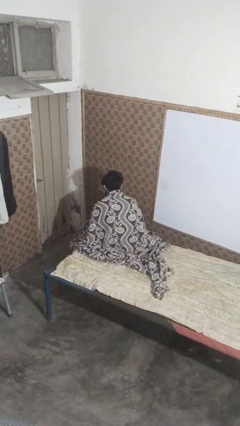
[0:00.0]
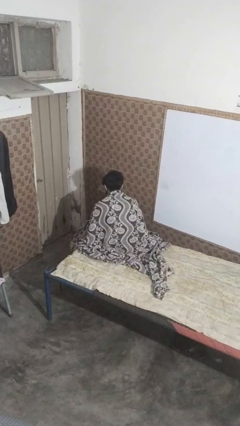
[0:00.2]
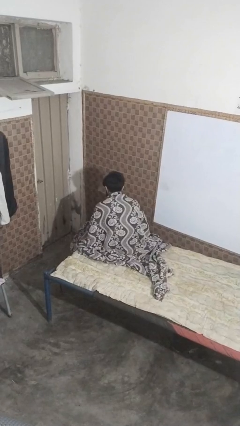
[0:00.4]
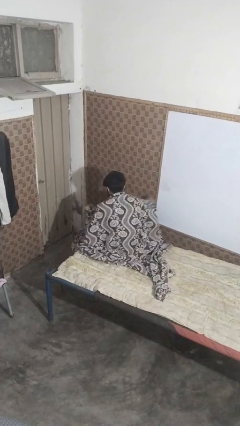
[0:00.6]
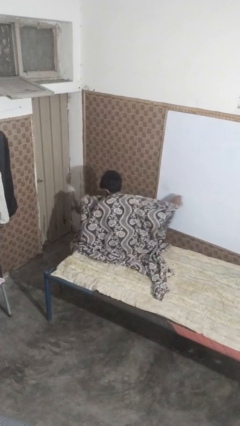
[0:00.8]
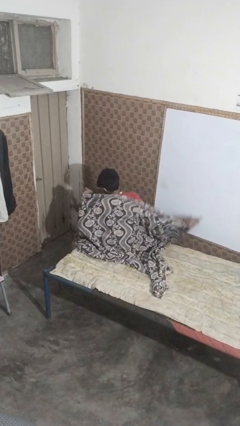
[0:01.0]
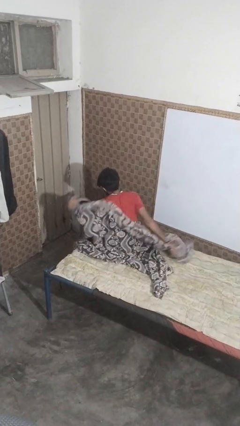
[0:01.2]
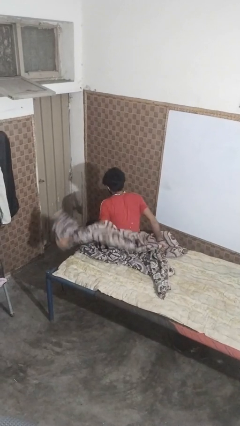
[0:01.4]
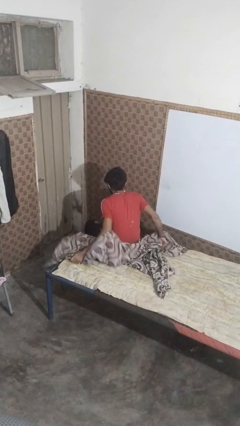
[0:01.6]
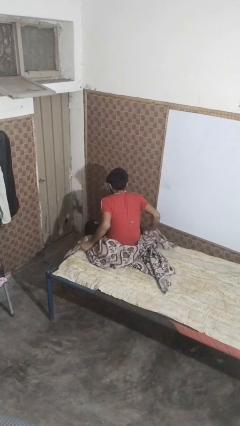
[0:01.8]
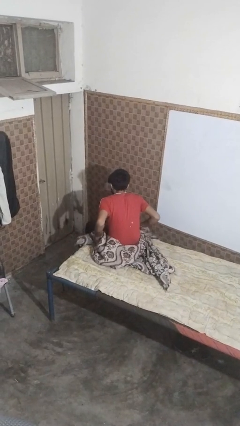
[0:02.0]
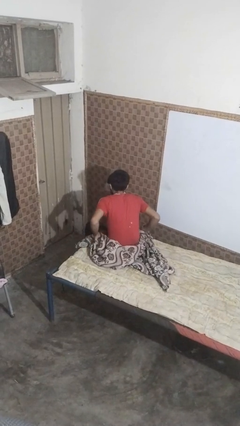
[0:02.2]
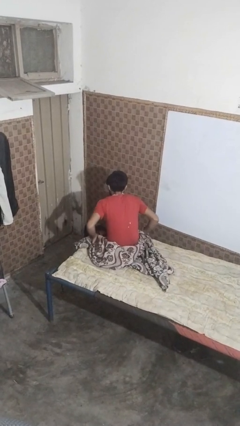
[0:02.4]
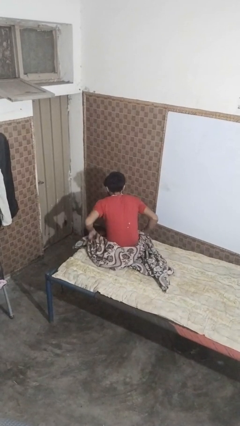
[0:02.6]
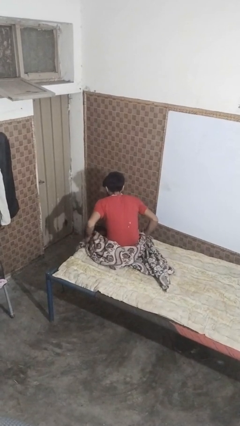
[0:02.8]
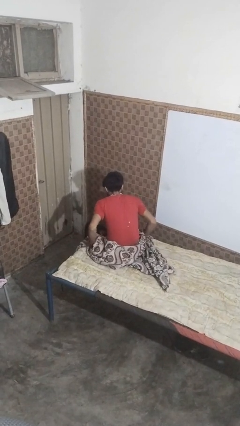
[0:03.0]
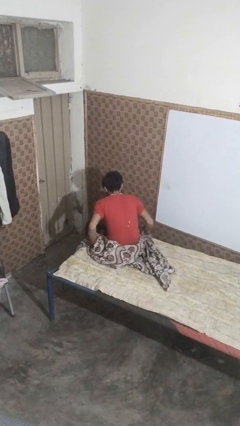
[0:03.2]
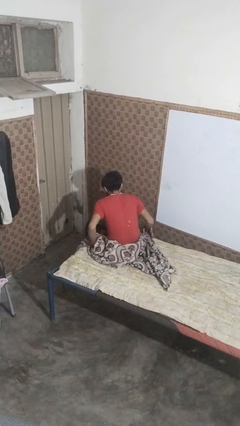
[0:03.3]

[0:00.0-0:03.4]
person uncovers with bedsheets

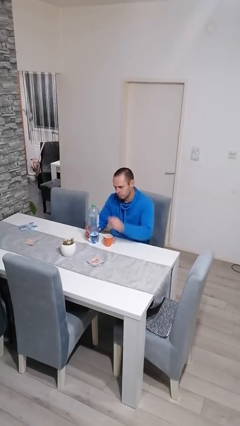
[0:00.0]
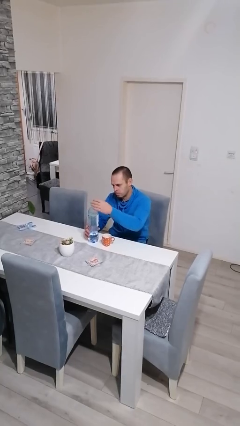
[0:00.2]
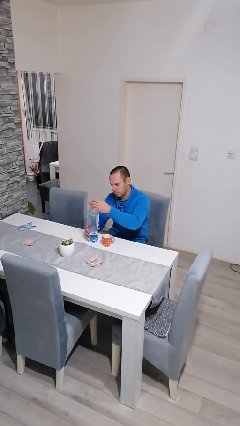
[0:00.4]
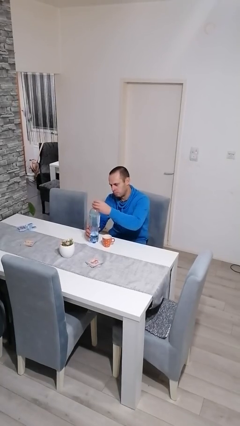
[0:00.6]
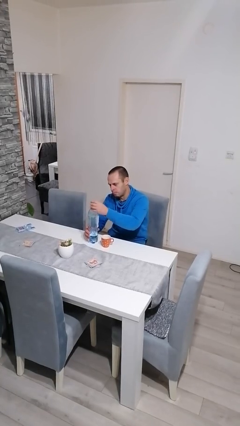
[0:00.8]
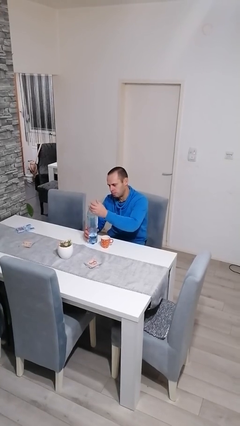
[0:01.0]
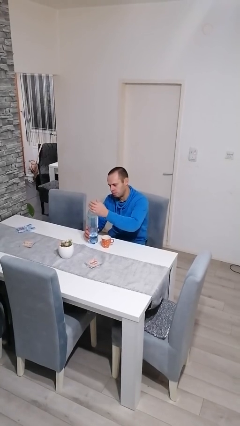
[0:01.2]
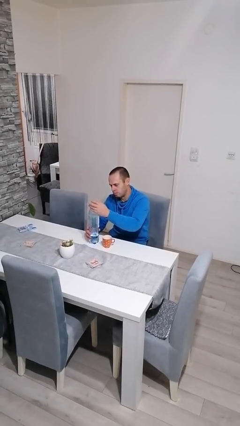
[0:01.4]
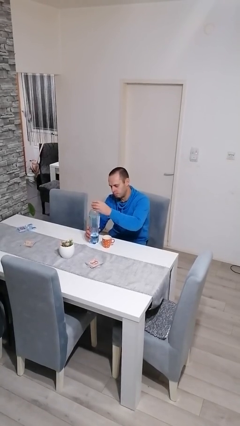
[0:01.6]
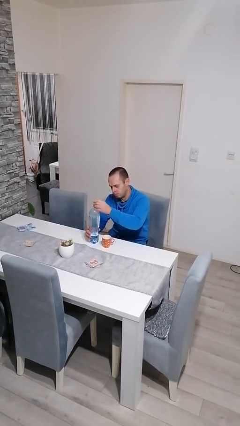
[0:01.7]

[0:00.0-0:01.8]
person unscrews lid from bottle

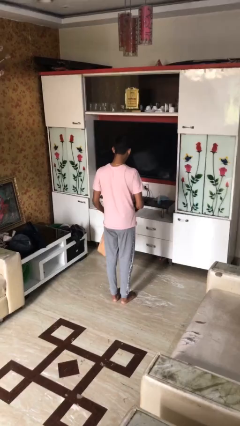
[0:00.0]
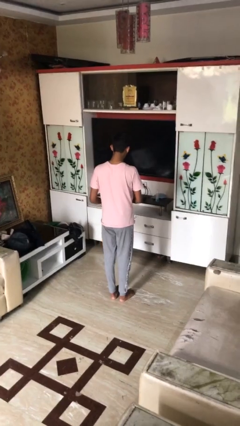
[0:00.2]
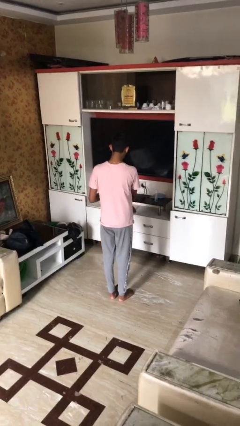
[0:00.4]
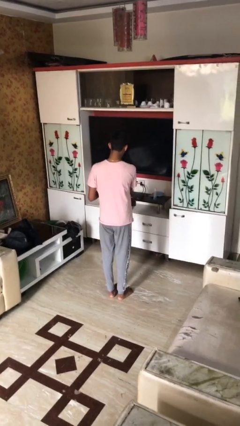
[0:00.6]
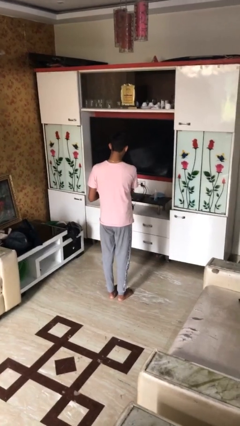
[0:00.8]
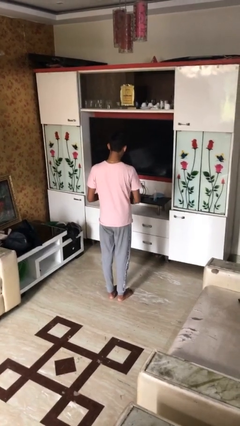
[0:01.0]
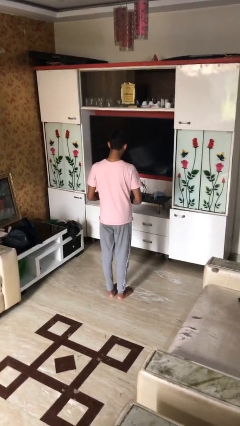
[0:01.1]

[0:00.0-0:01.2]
person puts object into bag

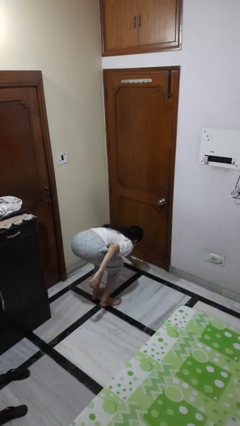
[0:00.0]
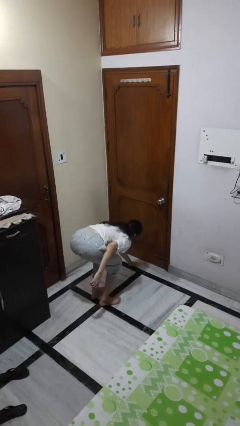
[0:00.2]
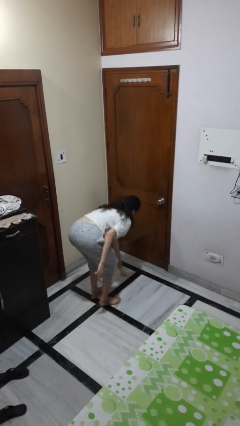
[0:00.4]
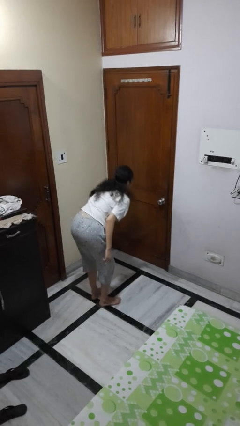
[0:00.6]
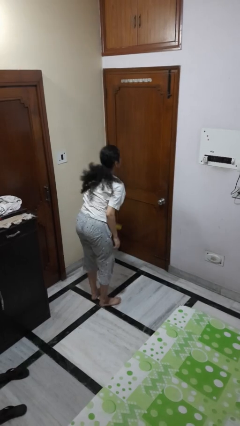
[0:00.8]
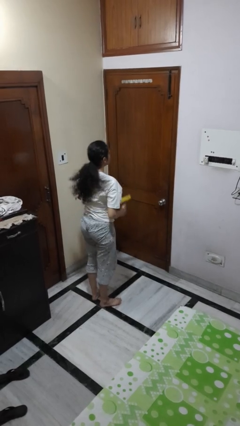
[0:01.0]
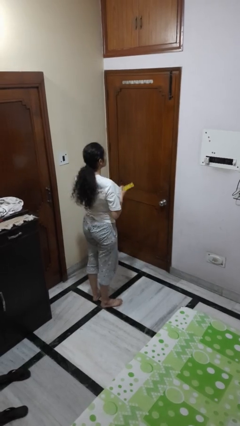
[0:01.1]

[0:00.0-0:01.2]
person picks up object from floor

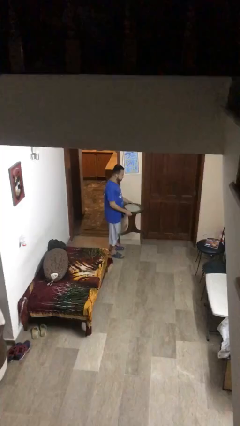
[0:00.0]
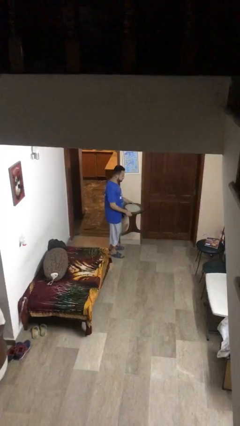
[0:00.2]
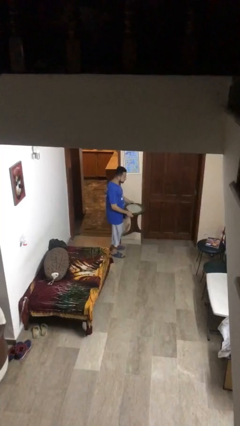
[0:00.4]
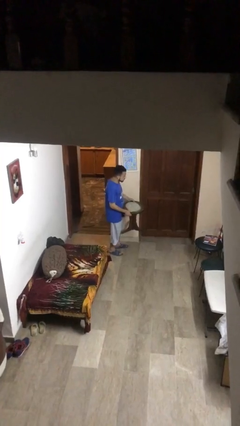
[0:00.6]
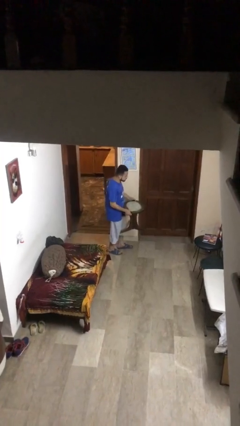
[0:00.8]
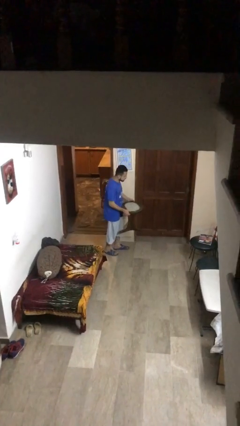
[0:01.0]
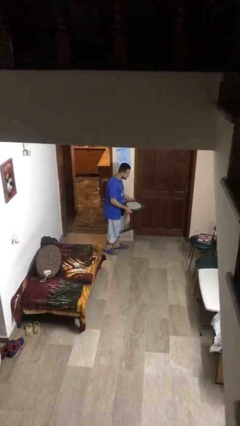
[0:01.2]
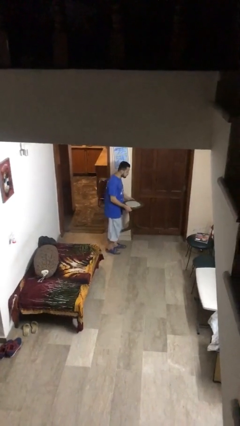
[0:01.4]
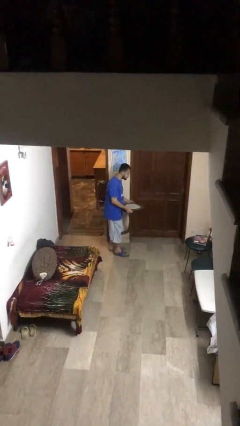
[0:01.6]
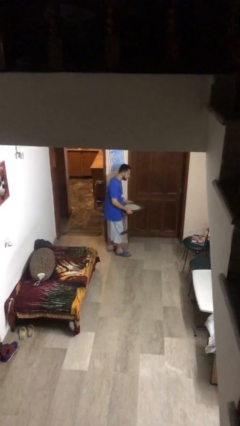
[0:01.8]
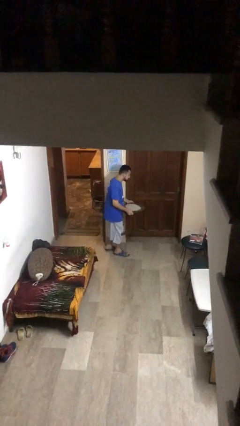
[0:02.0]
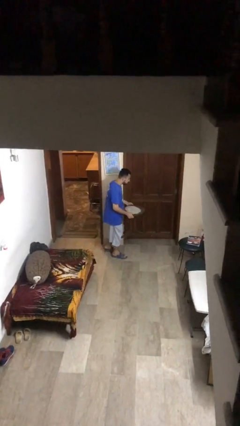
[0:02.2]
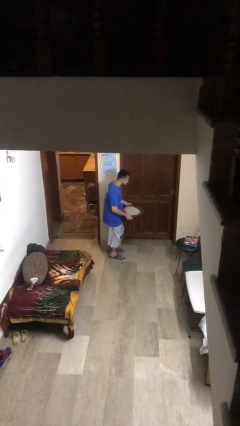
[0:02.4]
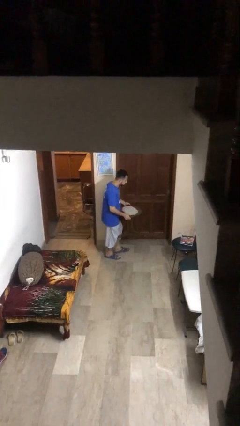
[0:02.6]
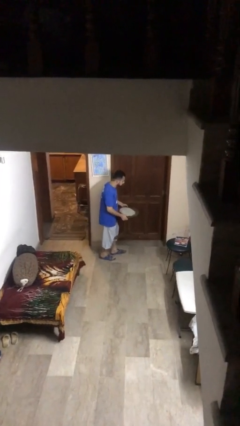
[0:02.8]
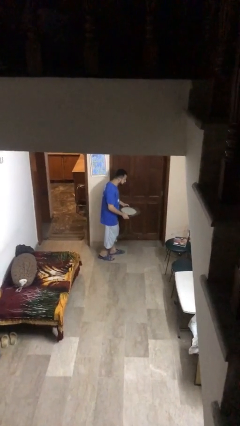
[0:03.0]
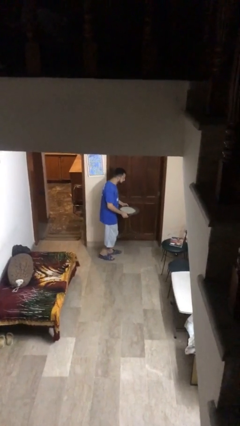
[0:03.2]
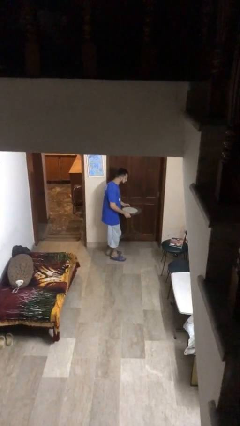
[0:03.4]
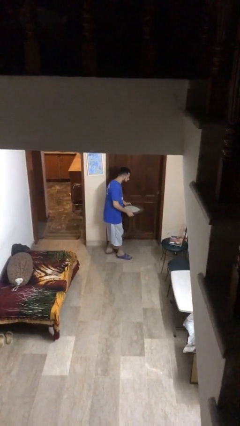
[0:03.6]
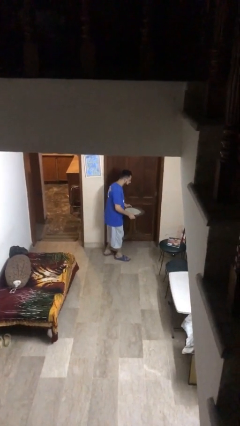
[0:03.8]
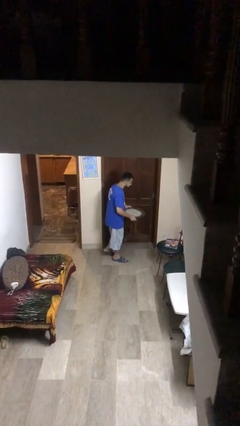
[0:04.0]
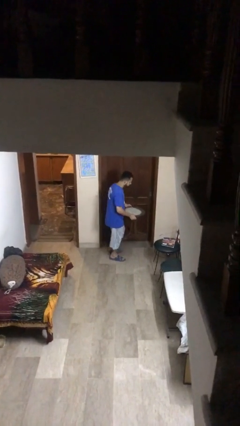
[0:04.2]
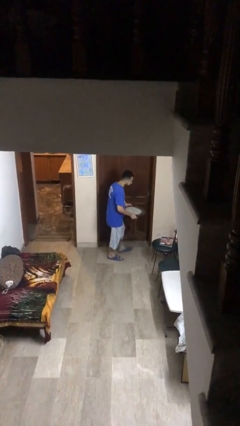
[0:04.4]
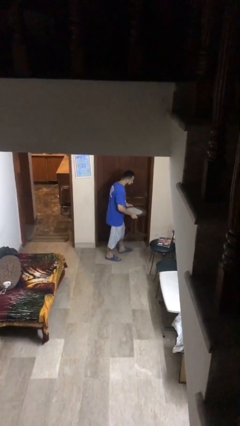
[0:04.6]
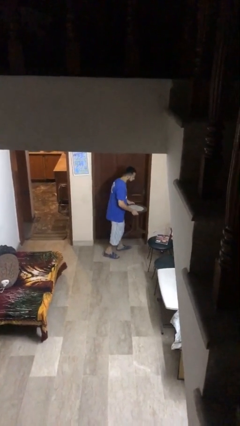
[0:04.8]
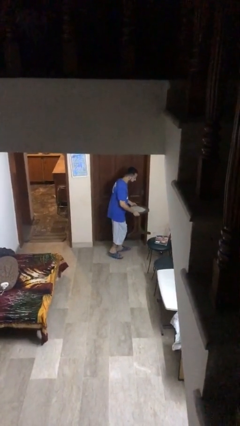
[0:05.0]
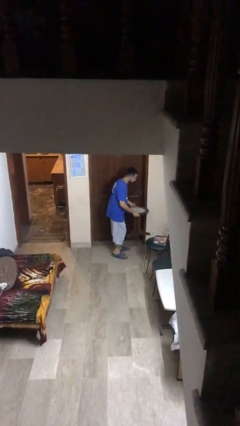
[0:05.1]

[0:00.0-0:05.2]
person carries heavy object

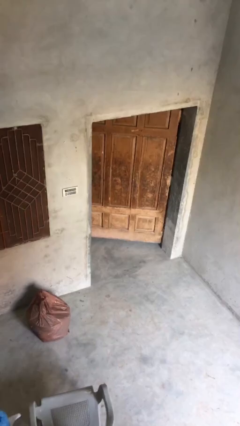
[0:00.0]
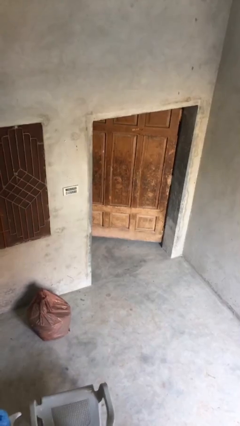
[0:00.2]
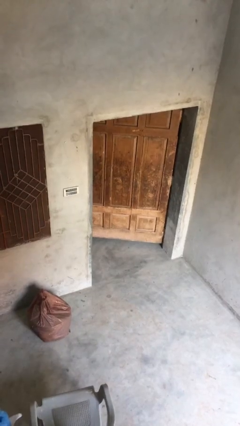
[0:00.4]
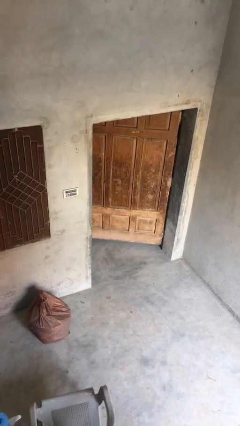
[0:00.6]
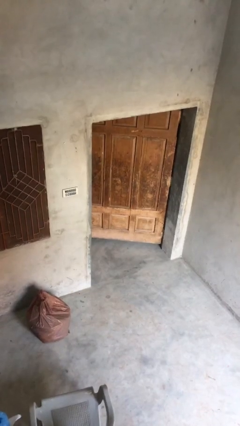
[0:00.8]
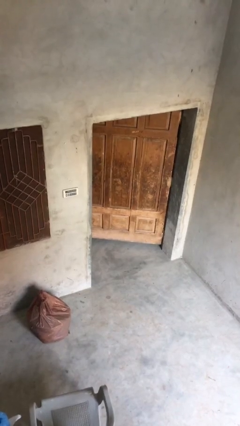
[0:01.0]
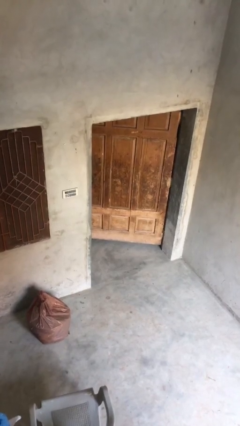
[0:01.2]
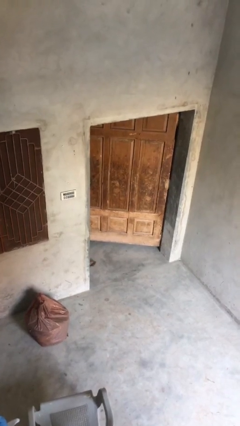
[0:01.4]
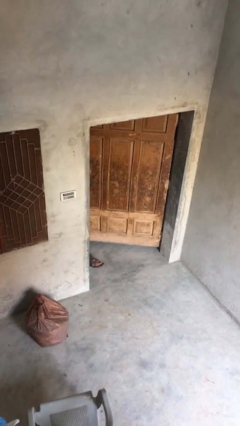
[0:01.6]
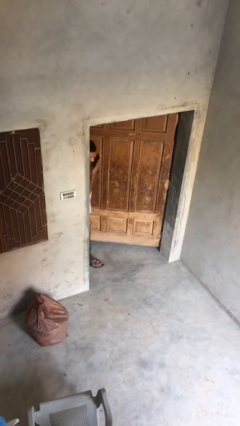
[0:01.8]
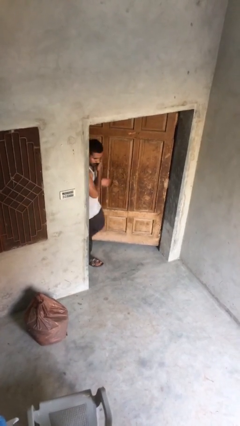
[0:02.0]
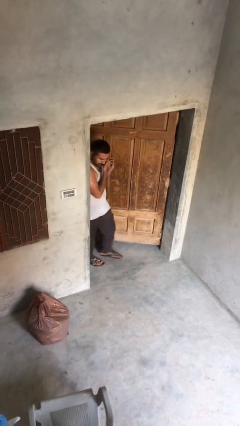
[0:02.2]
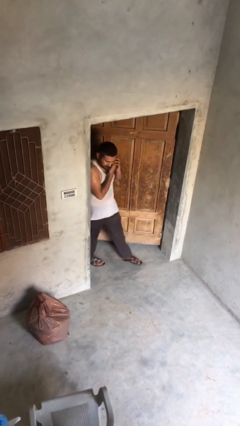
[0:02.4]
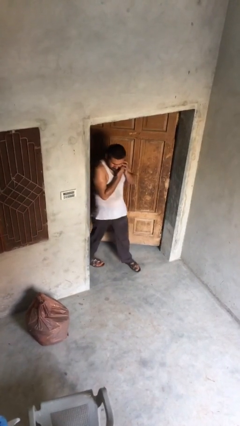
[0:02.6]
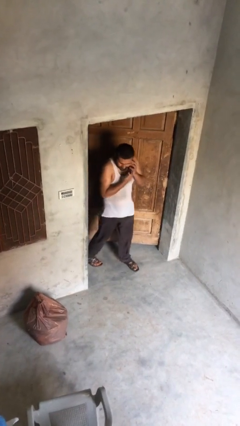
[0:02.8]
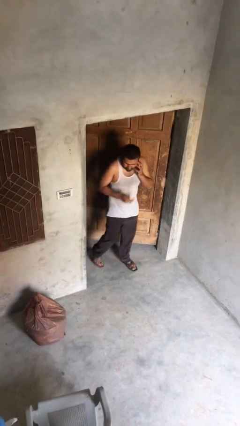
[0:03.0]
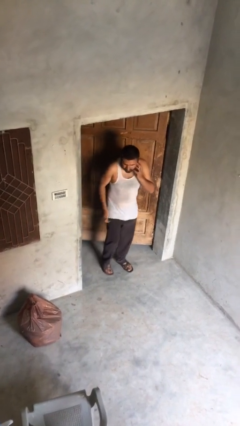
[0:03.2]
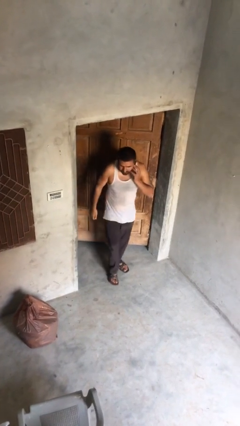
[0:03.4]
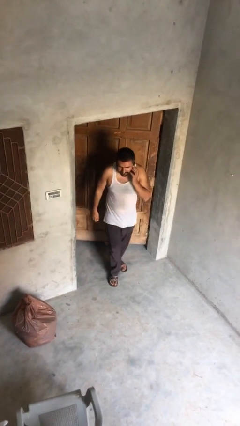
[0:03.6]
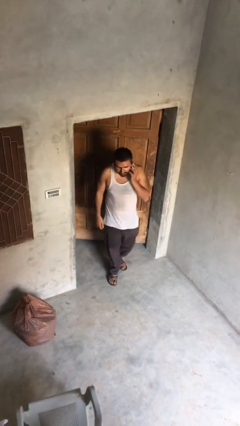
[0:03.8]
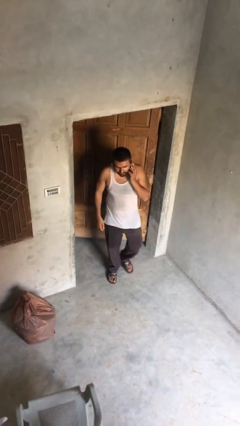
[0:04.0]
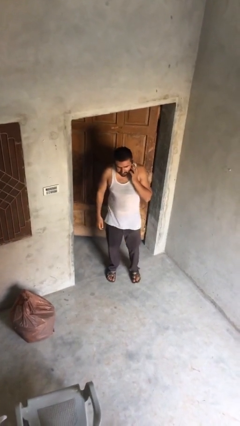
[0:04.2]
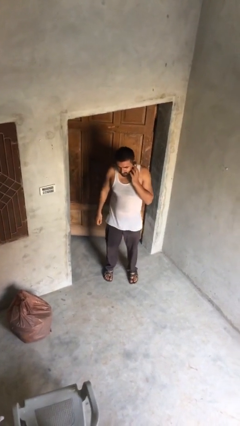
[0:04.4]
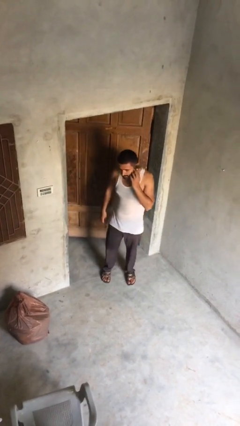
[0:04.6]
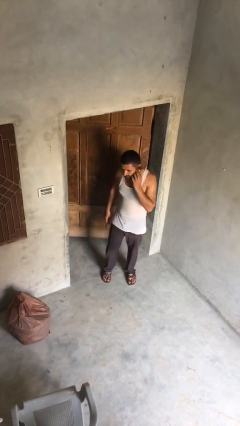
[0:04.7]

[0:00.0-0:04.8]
person enters scene through structure
